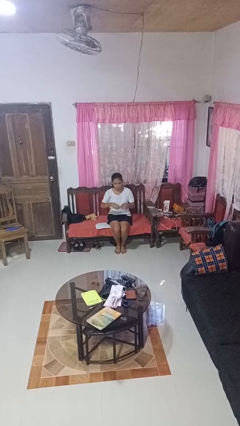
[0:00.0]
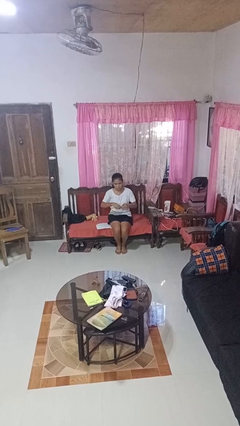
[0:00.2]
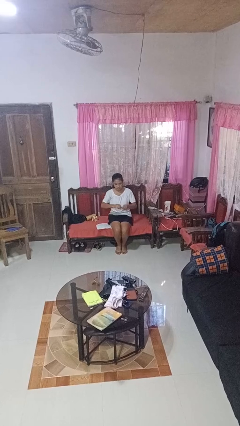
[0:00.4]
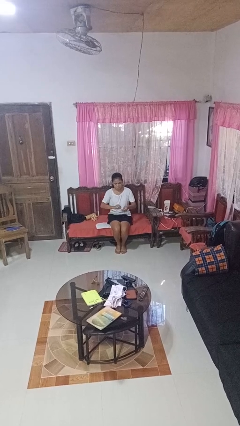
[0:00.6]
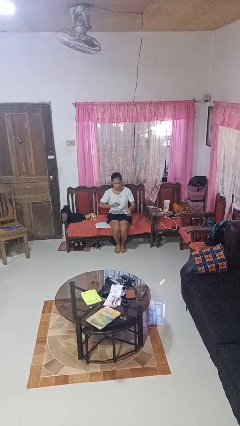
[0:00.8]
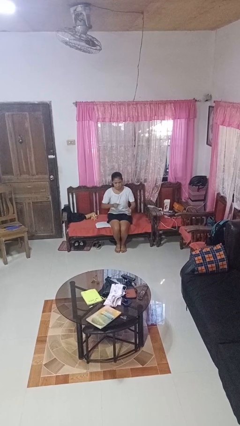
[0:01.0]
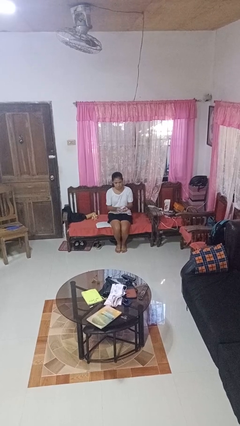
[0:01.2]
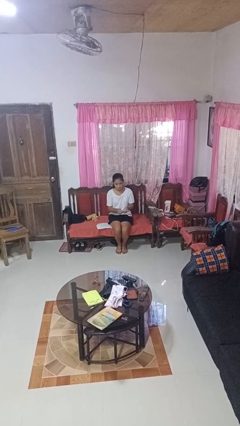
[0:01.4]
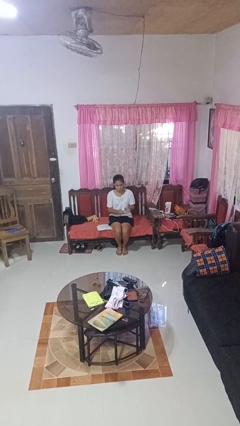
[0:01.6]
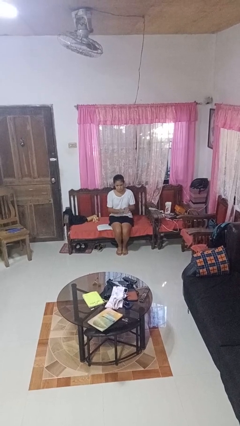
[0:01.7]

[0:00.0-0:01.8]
person tears paper

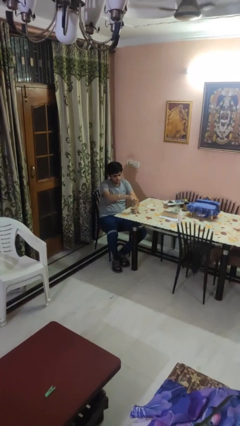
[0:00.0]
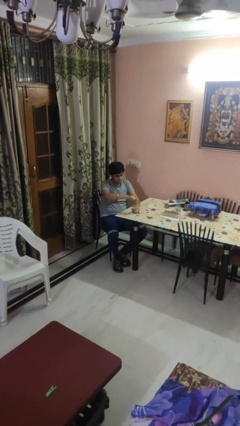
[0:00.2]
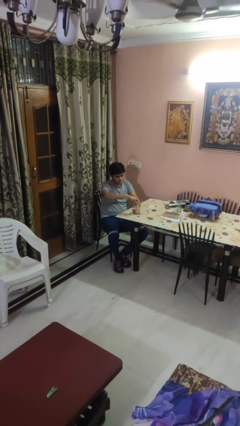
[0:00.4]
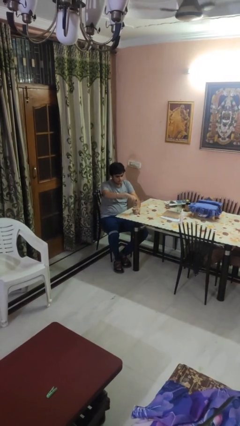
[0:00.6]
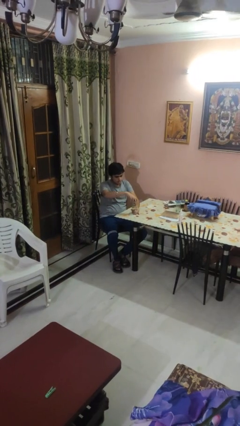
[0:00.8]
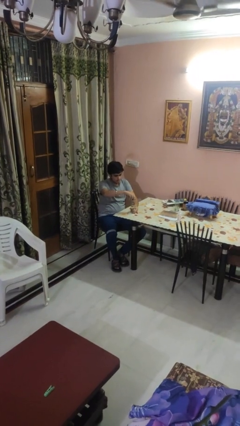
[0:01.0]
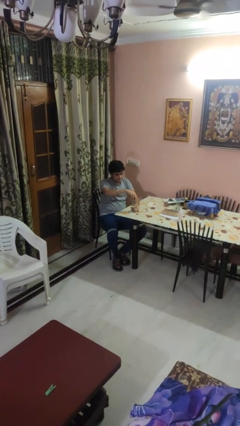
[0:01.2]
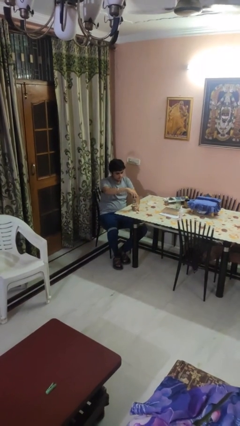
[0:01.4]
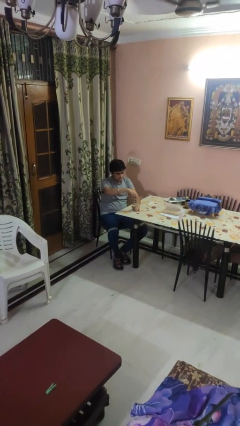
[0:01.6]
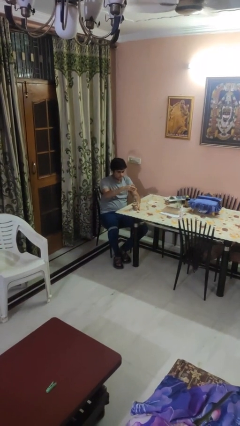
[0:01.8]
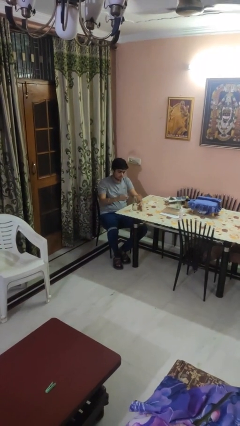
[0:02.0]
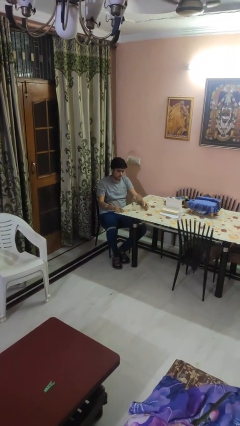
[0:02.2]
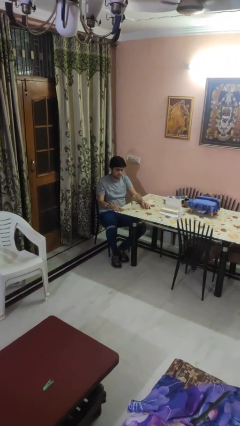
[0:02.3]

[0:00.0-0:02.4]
person unscrews lid from bottle

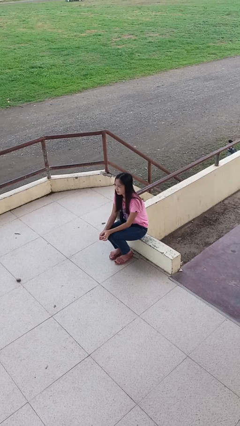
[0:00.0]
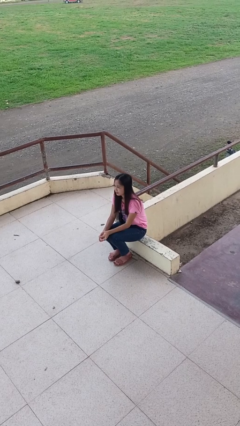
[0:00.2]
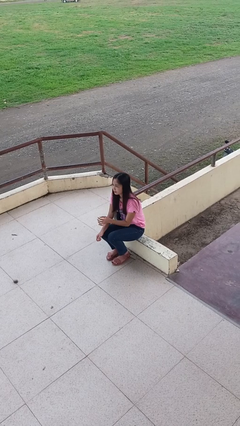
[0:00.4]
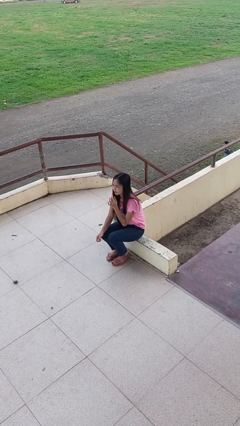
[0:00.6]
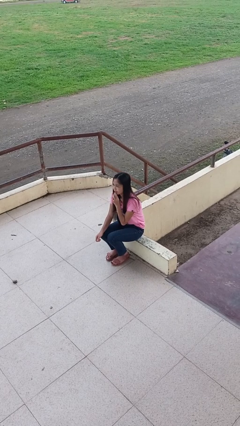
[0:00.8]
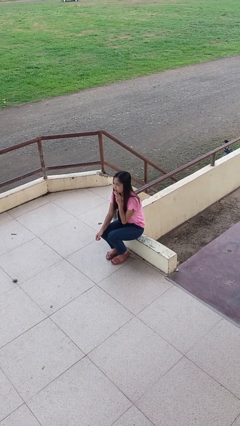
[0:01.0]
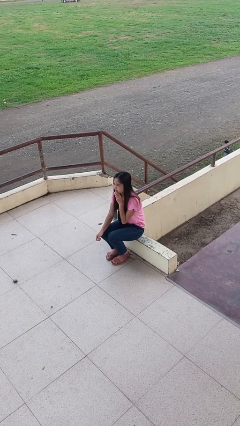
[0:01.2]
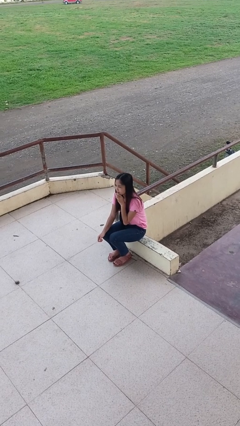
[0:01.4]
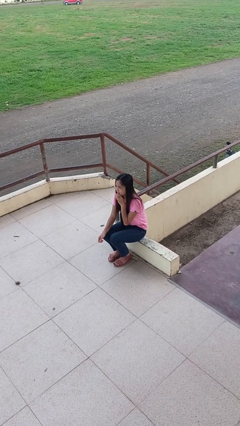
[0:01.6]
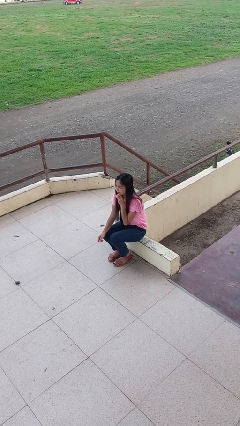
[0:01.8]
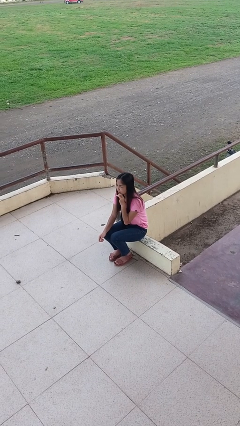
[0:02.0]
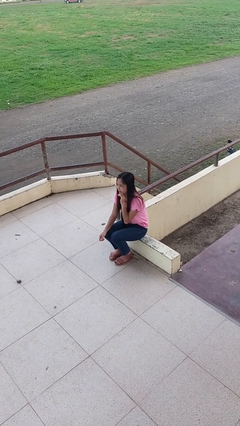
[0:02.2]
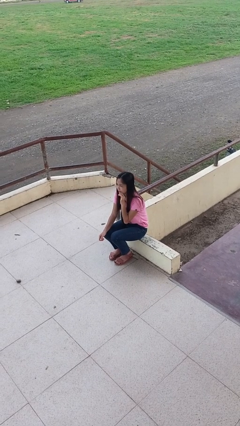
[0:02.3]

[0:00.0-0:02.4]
person strokes chin

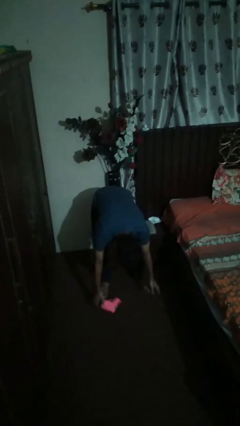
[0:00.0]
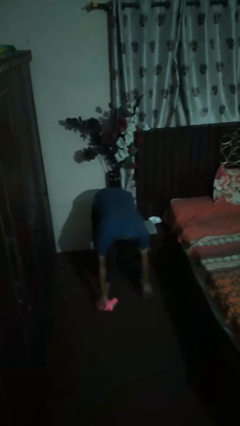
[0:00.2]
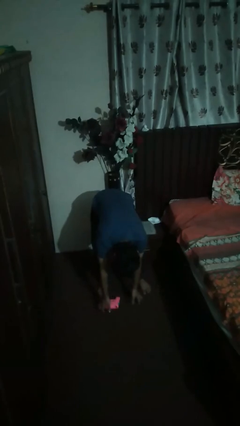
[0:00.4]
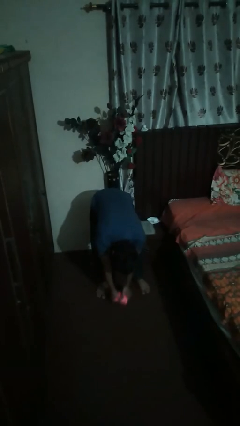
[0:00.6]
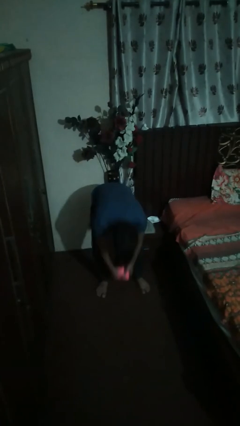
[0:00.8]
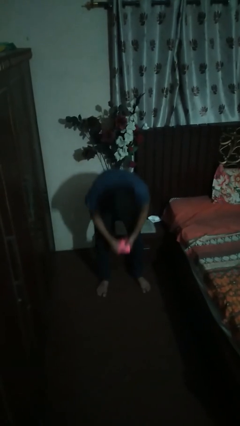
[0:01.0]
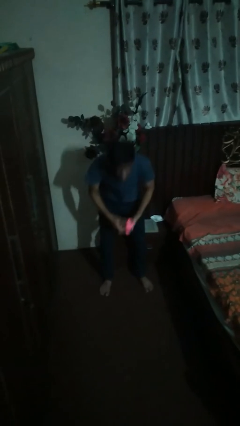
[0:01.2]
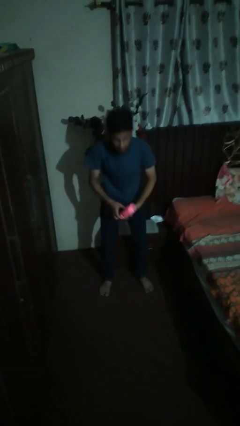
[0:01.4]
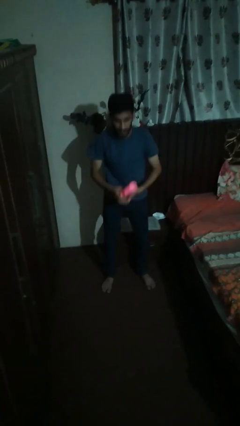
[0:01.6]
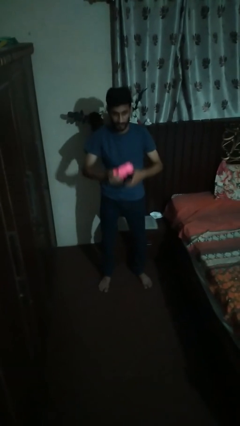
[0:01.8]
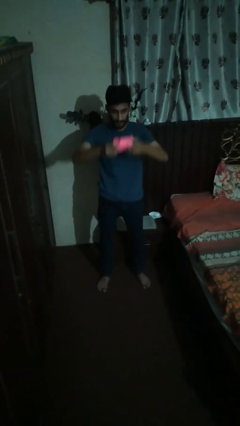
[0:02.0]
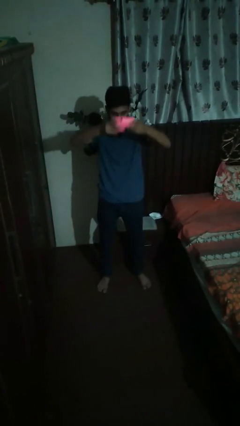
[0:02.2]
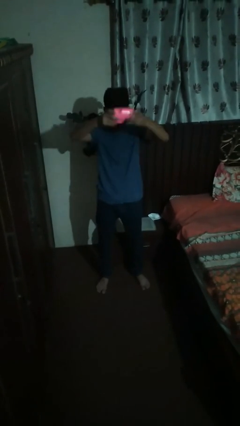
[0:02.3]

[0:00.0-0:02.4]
person picks up object from floor

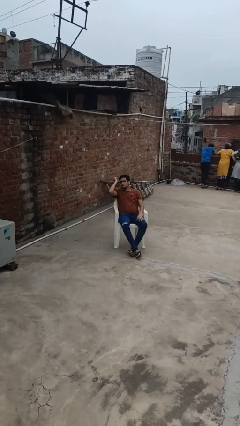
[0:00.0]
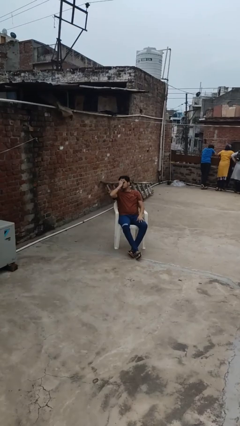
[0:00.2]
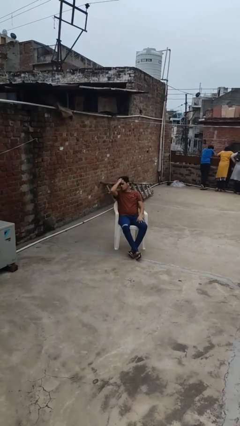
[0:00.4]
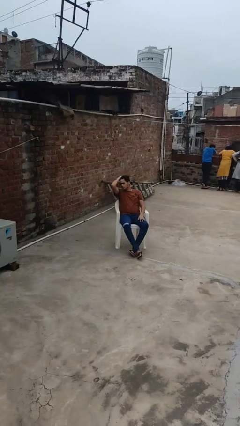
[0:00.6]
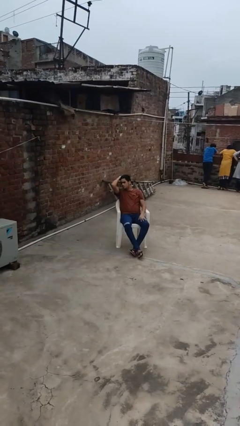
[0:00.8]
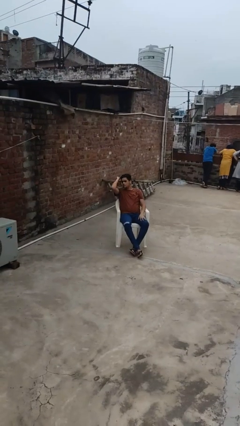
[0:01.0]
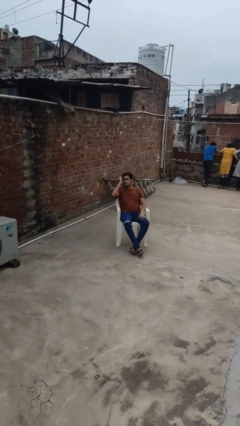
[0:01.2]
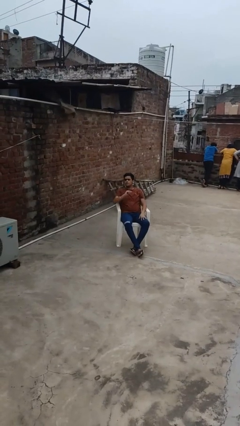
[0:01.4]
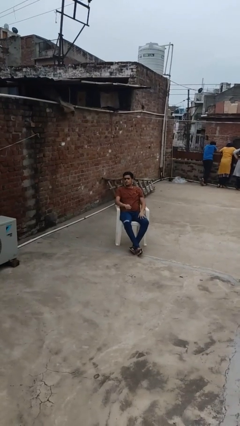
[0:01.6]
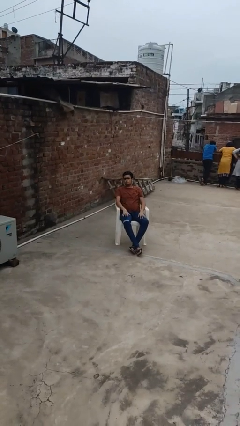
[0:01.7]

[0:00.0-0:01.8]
person strokes hair

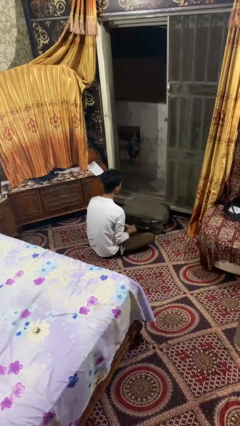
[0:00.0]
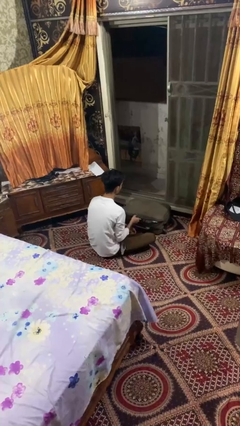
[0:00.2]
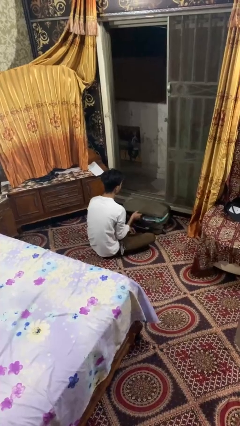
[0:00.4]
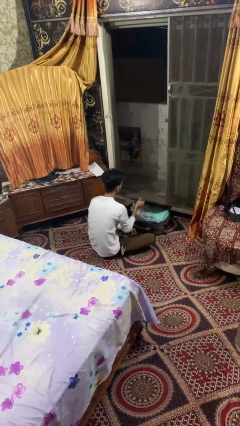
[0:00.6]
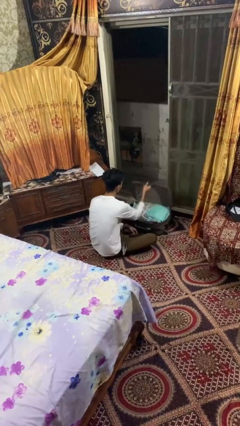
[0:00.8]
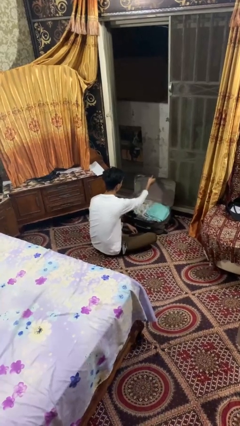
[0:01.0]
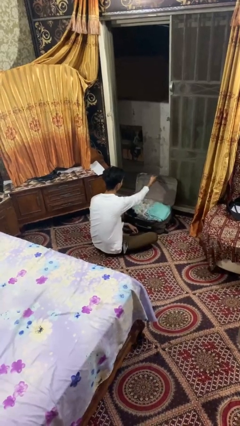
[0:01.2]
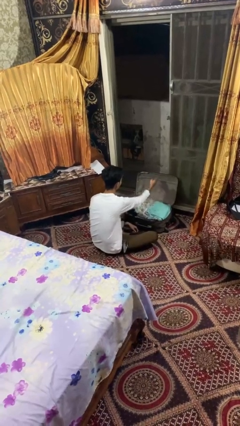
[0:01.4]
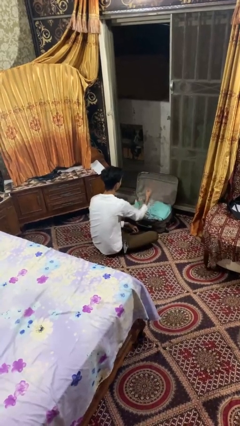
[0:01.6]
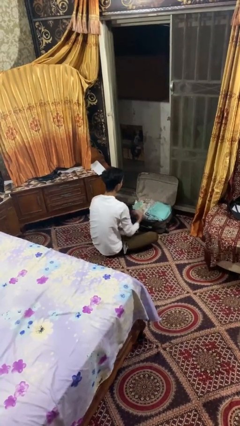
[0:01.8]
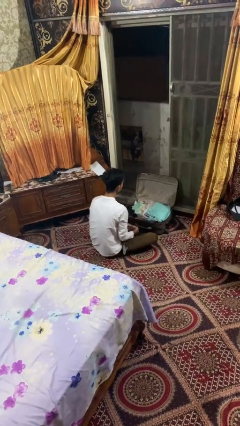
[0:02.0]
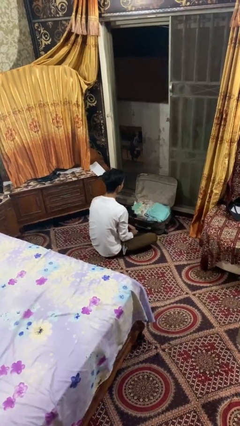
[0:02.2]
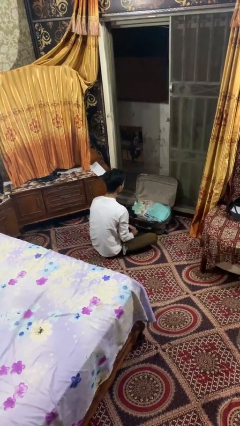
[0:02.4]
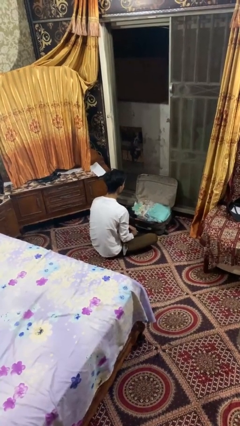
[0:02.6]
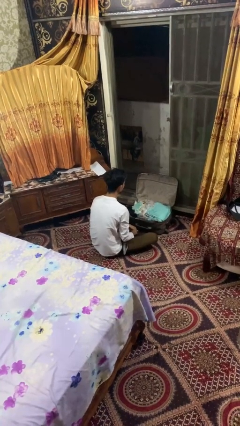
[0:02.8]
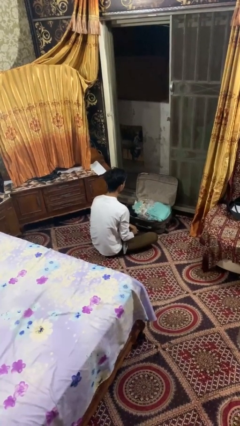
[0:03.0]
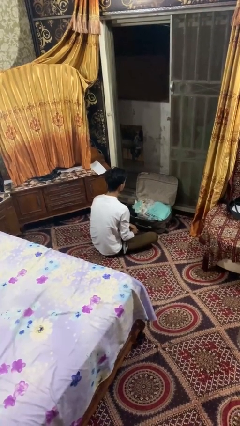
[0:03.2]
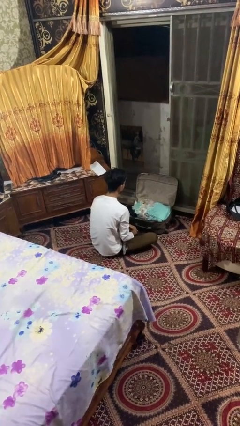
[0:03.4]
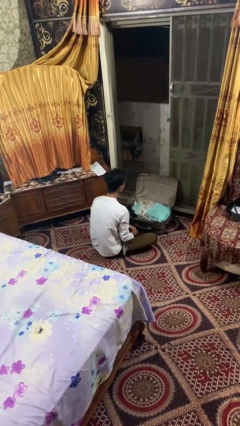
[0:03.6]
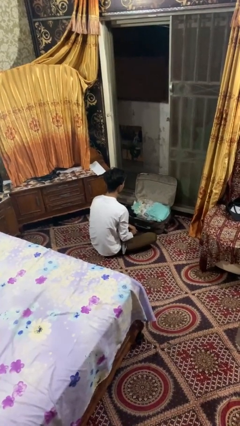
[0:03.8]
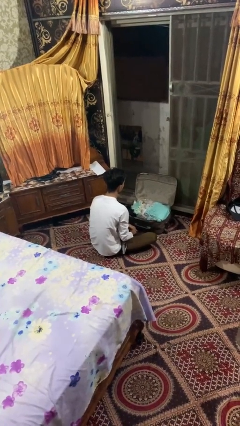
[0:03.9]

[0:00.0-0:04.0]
person opens suitcase

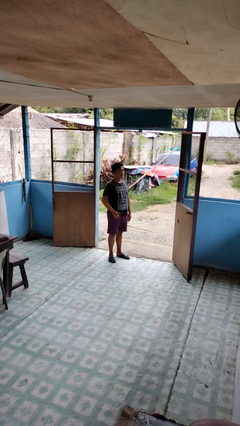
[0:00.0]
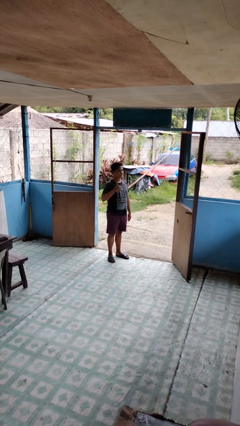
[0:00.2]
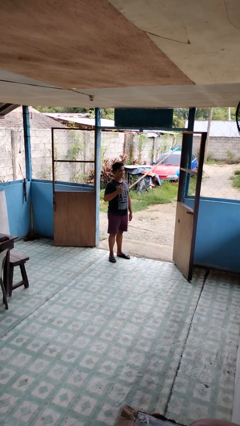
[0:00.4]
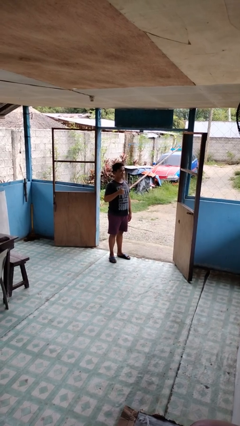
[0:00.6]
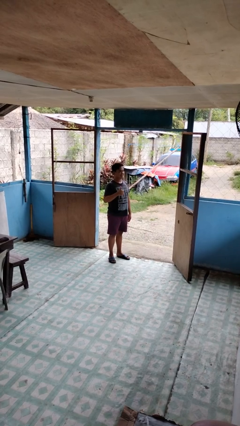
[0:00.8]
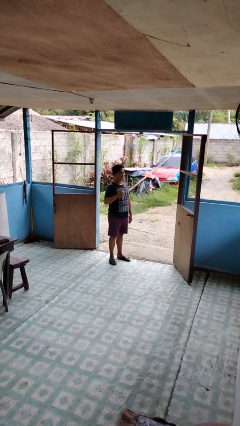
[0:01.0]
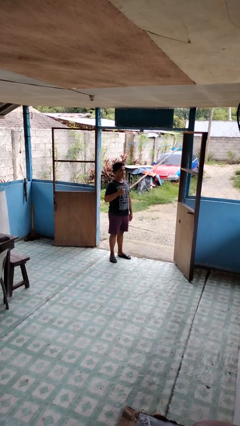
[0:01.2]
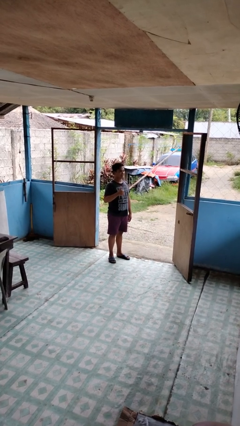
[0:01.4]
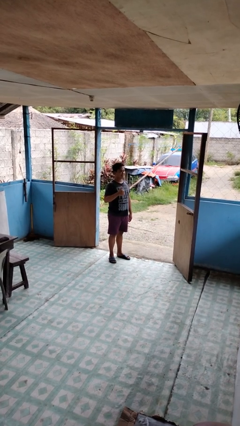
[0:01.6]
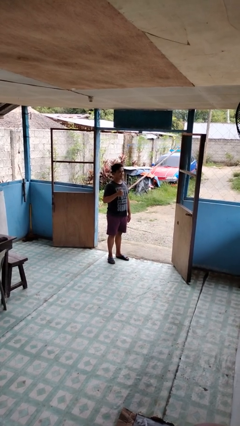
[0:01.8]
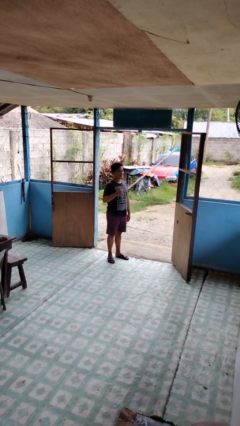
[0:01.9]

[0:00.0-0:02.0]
person gestures thumbs up
